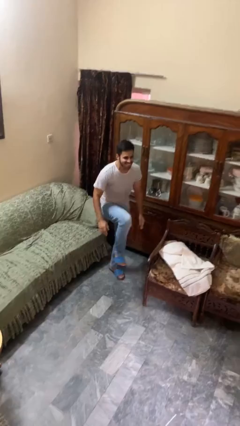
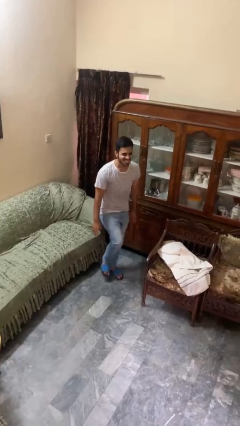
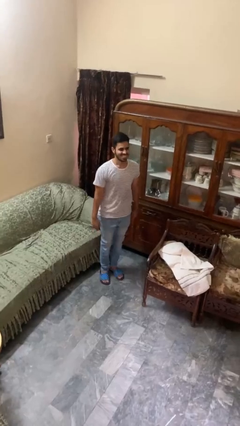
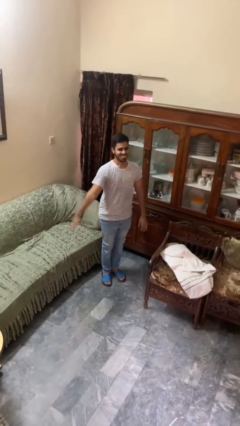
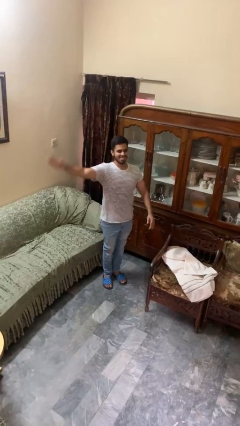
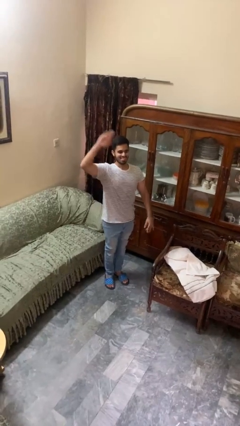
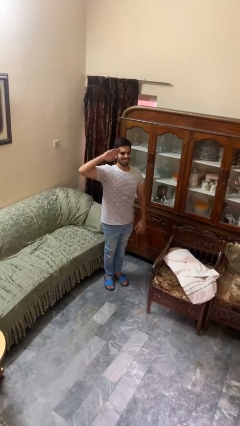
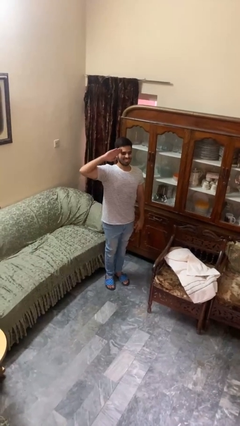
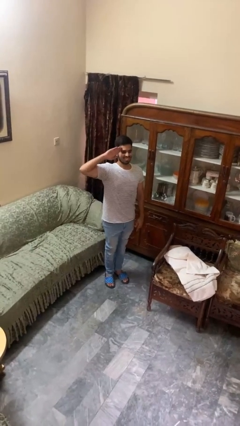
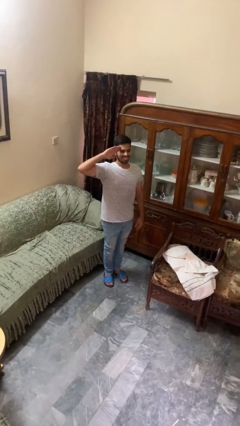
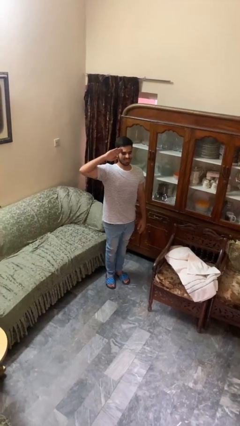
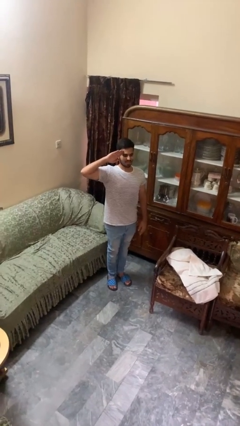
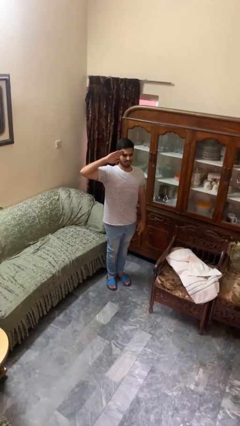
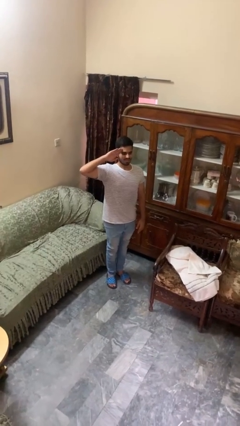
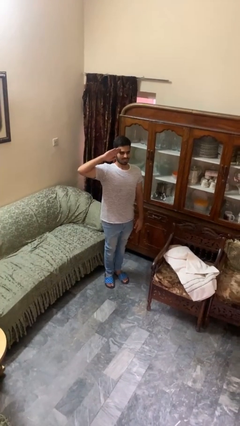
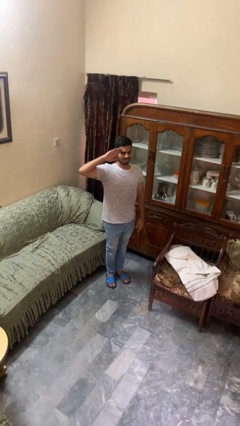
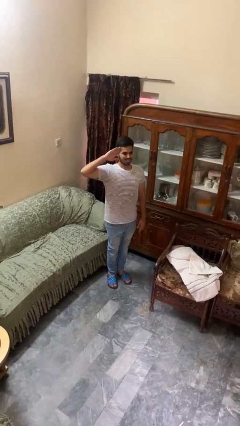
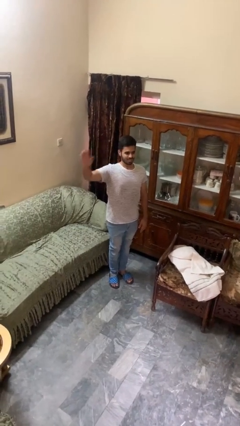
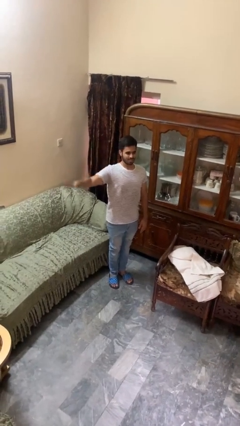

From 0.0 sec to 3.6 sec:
person salutes

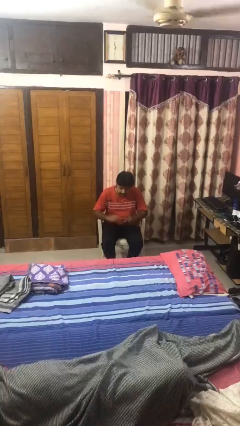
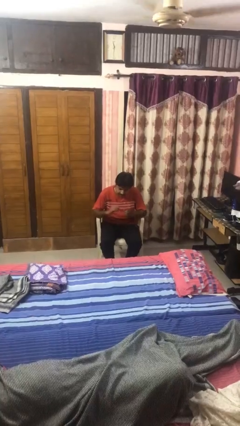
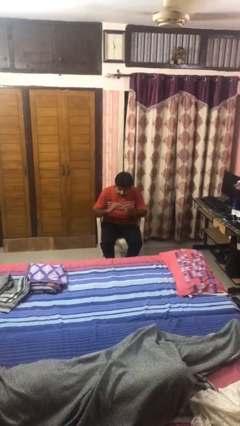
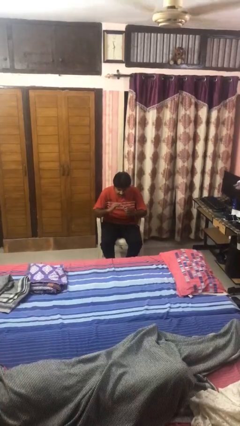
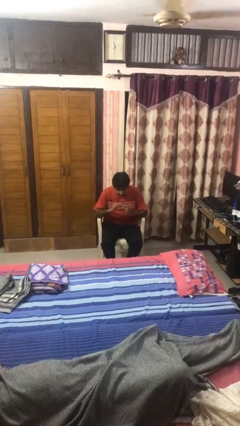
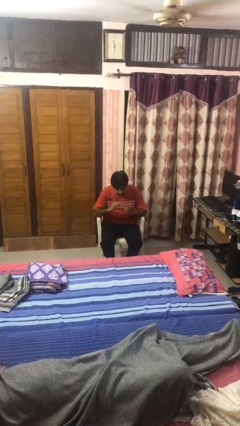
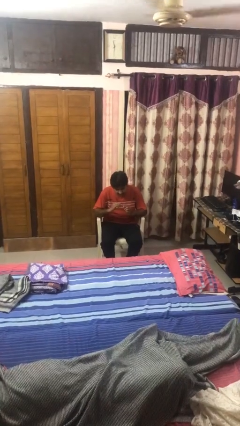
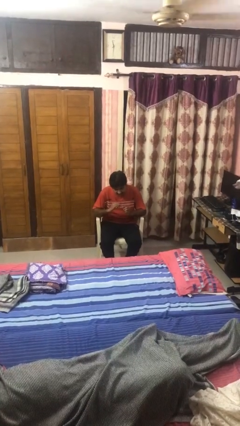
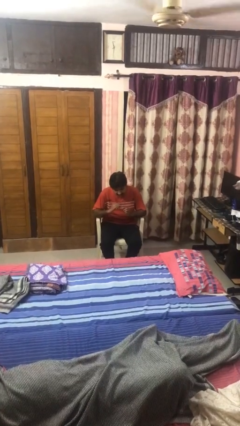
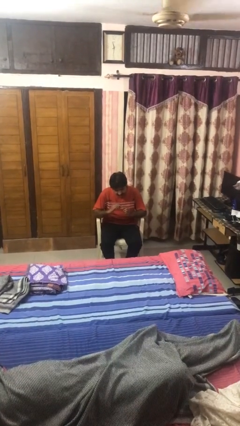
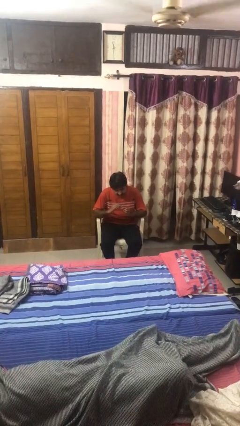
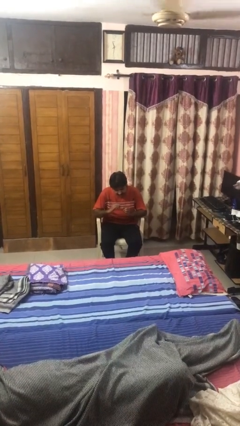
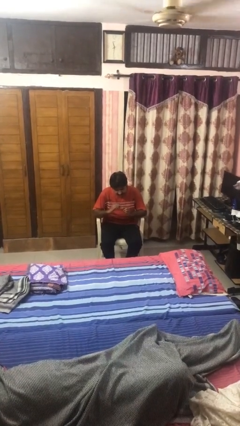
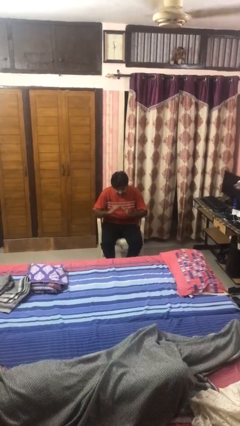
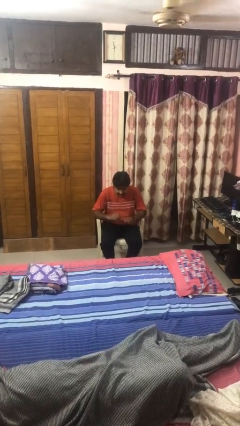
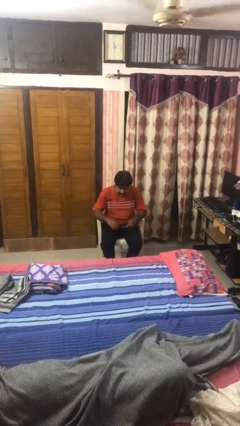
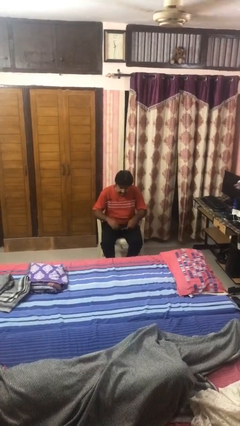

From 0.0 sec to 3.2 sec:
person files fingernails

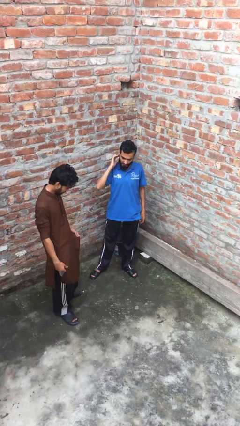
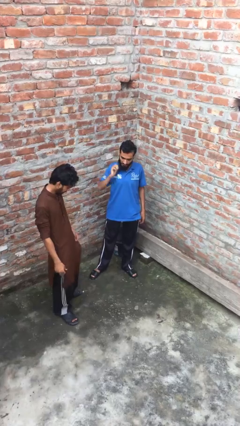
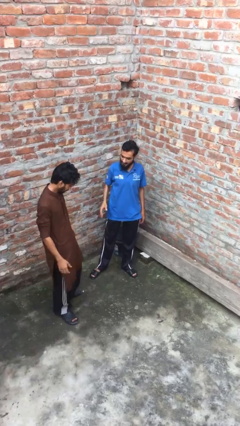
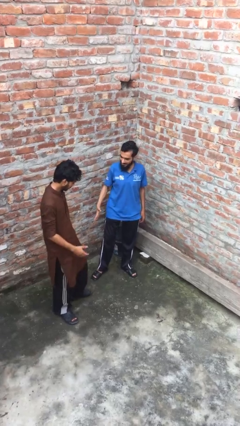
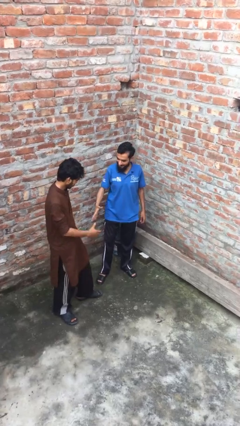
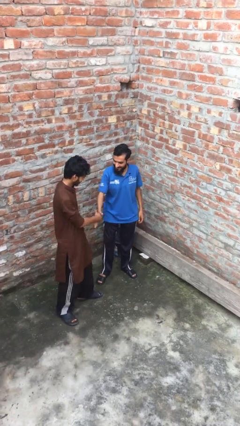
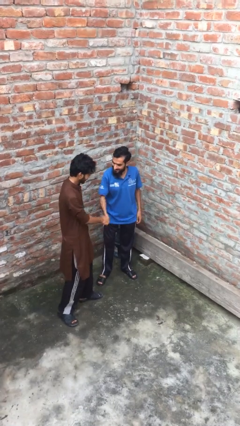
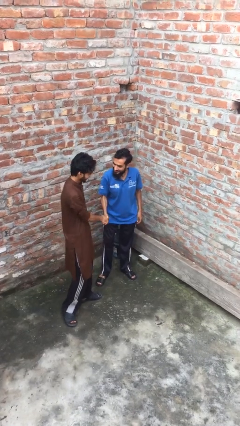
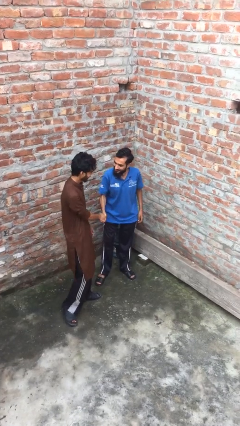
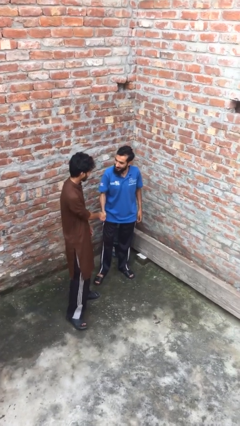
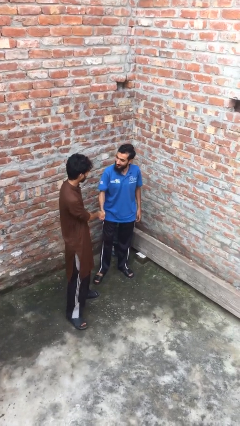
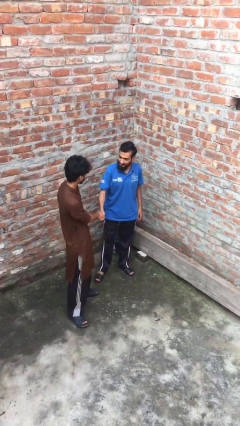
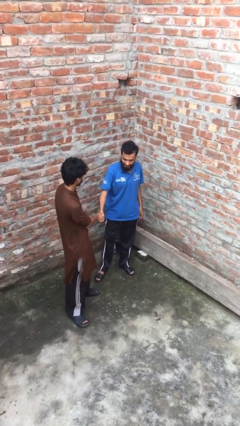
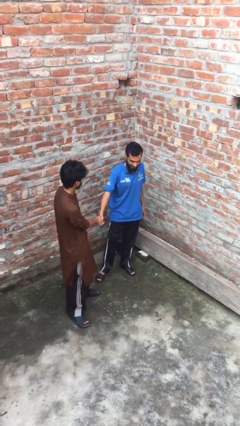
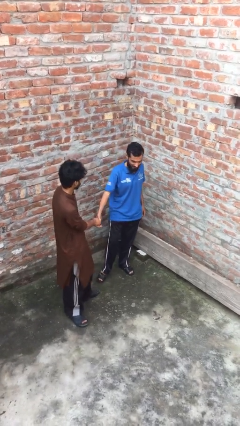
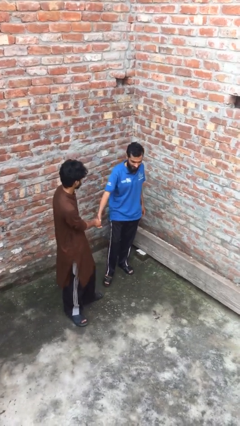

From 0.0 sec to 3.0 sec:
person shakes hand

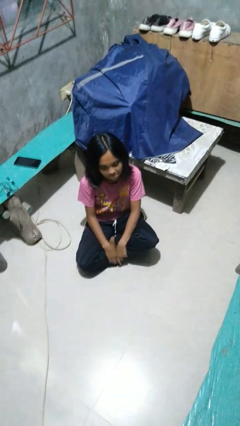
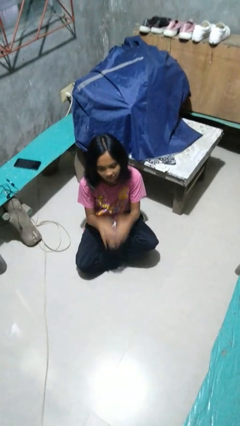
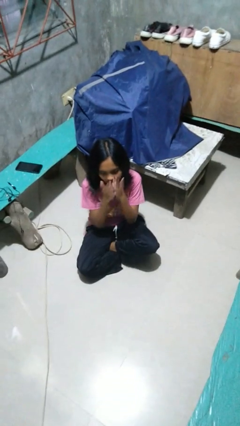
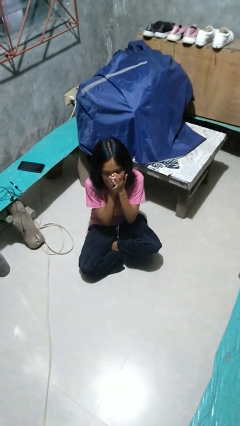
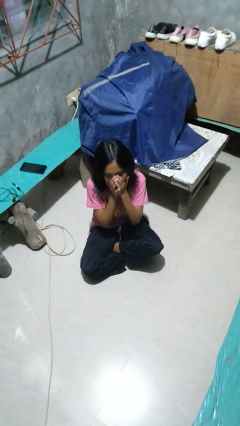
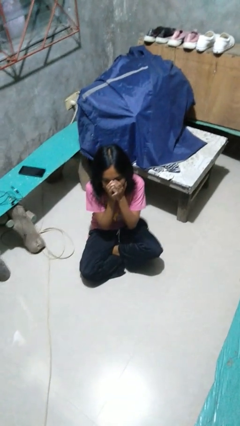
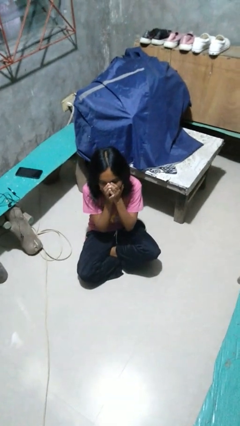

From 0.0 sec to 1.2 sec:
person yawns

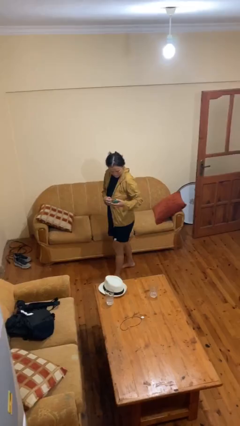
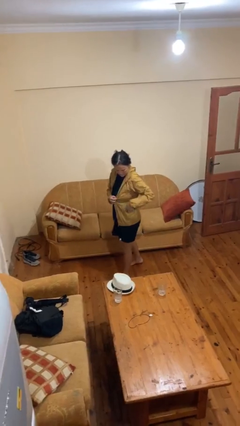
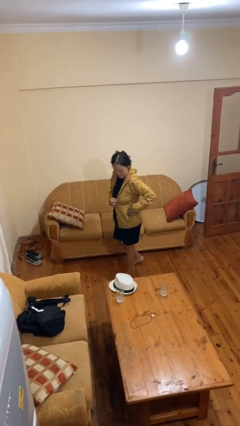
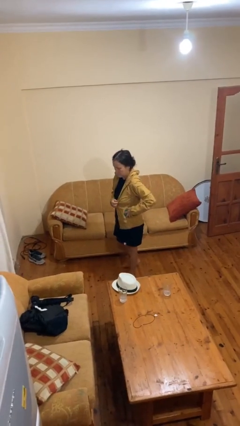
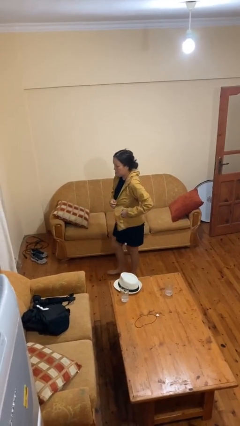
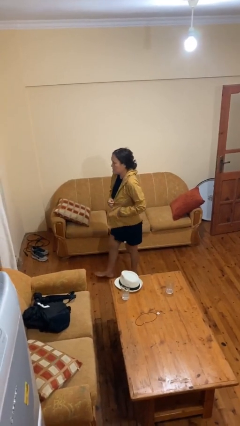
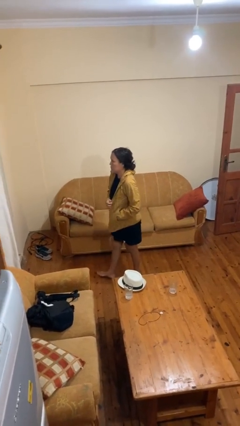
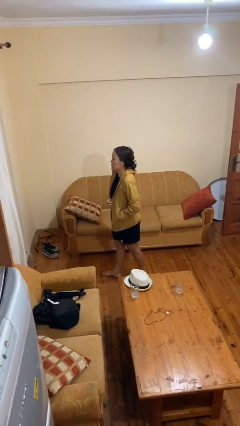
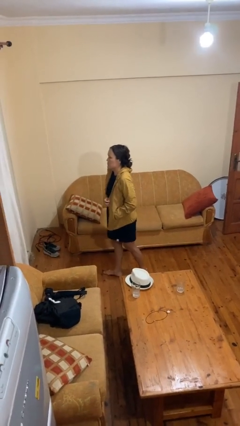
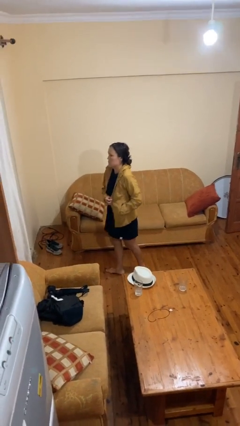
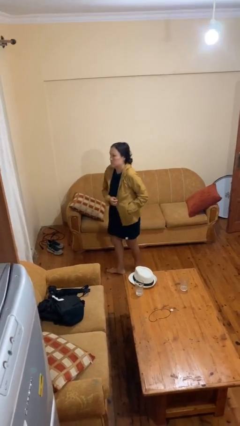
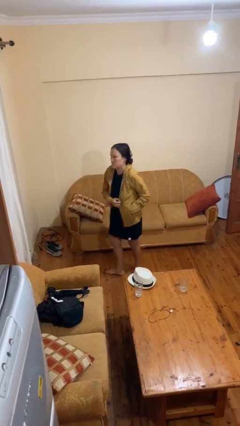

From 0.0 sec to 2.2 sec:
person puts phone into pocket

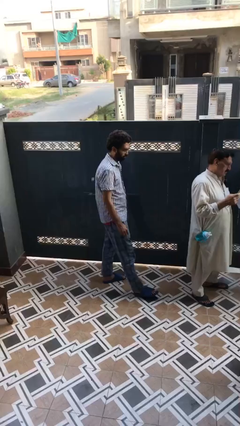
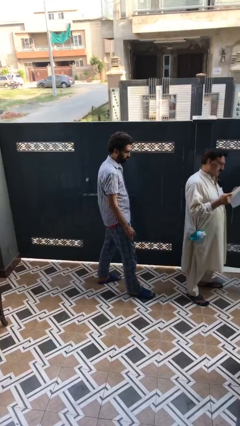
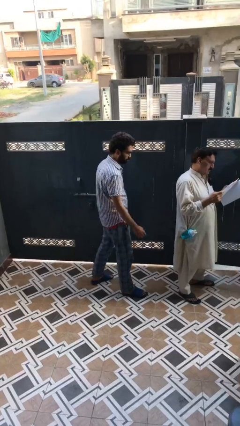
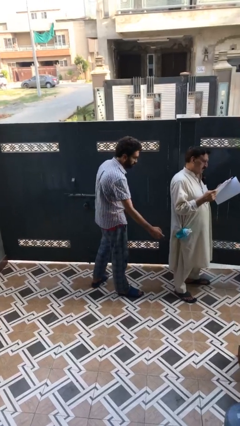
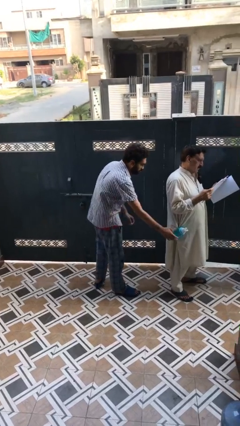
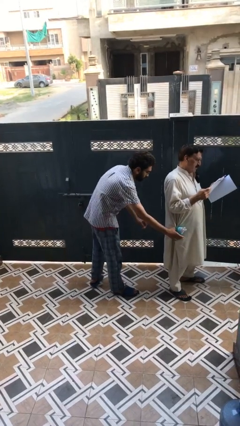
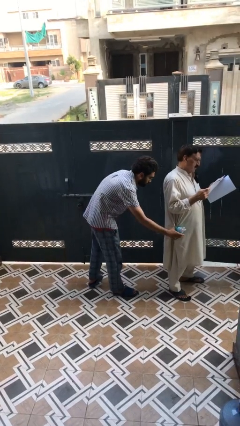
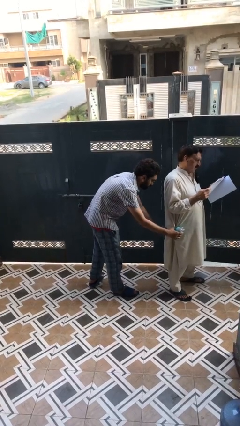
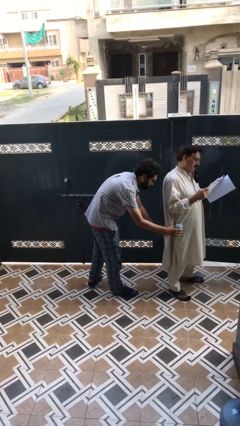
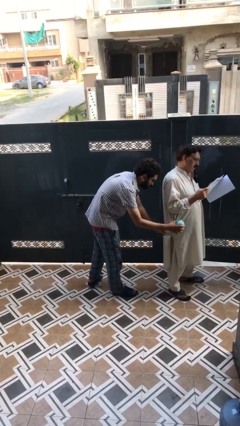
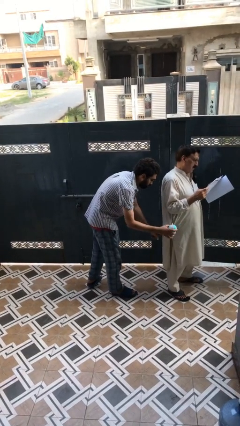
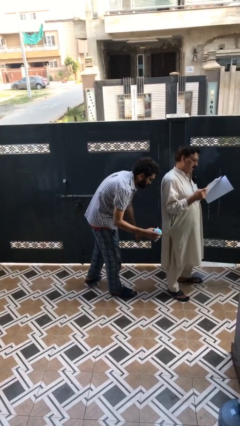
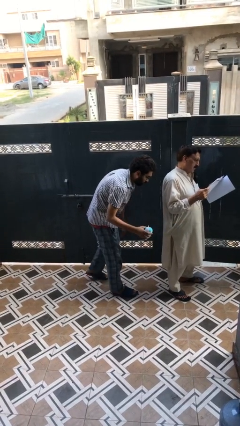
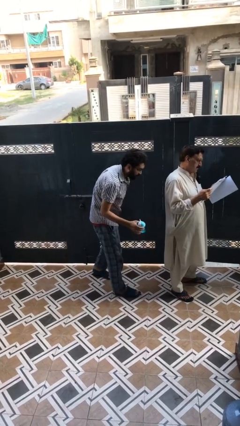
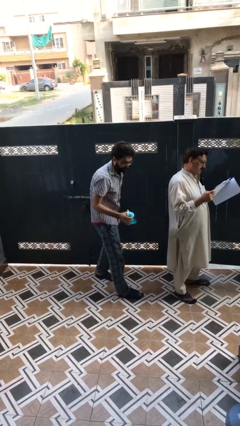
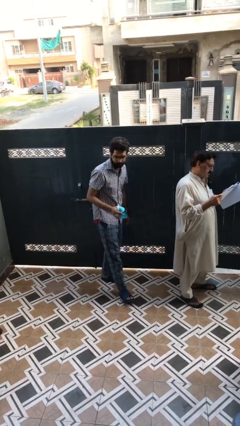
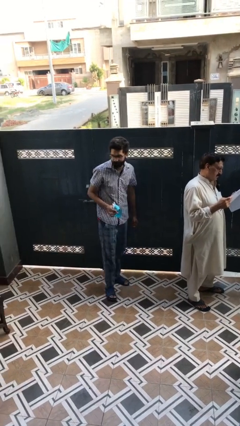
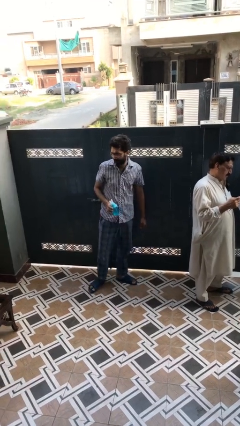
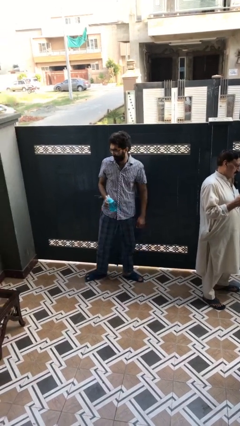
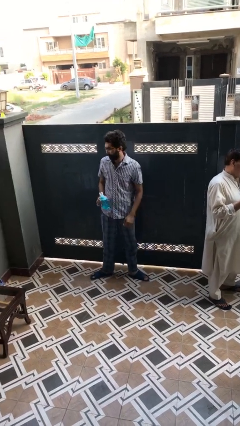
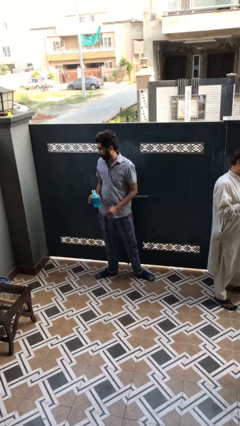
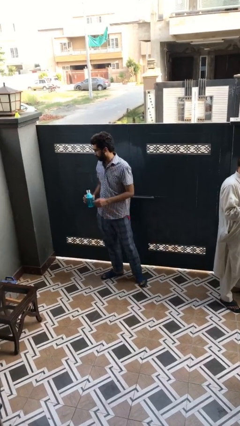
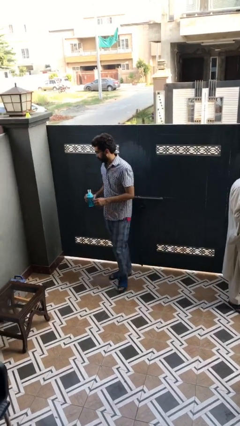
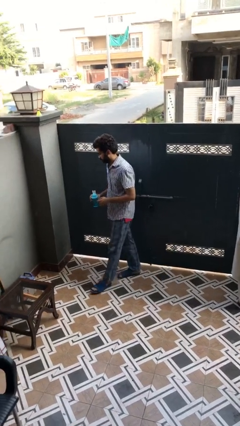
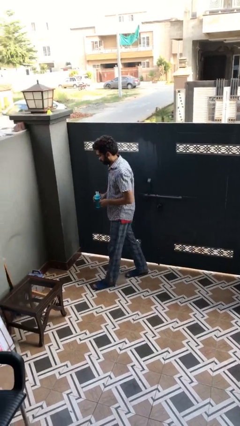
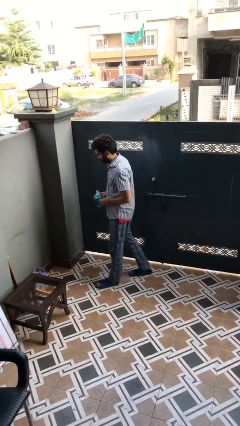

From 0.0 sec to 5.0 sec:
person steals object from person
